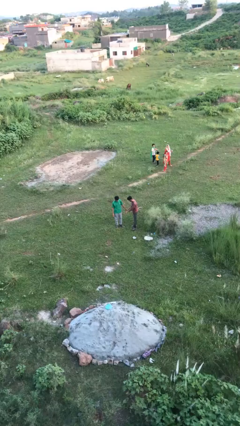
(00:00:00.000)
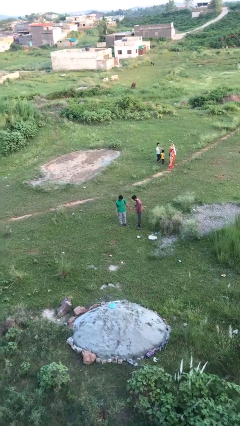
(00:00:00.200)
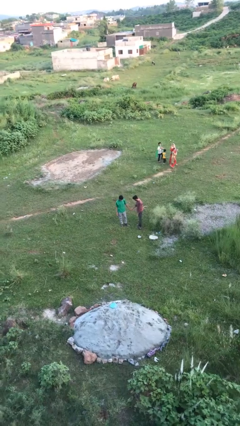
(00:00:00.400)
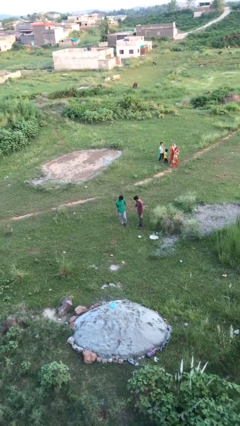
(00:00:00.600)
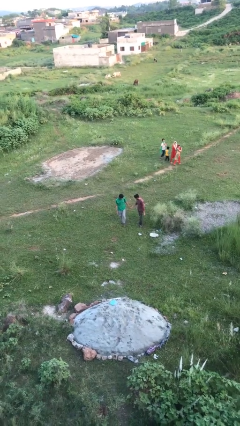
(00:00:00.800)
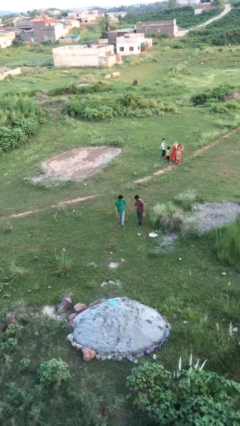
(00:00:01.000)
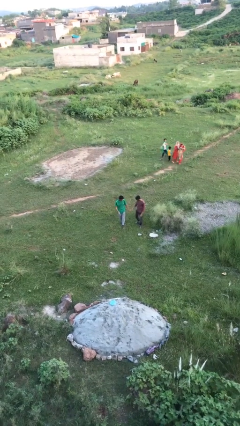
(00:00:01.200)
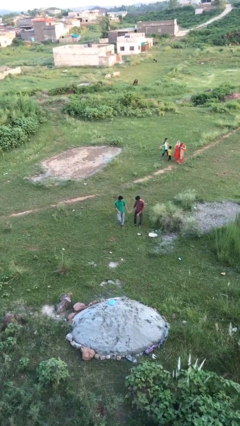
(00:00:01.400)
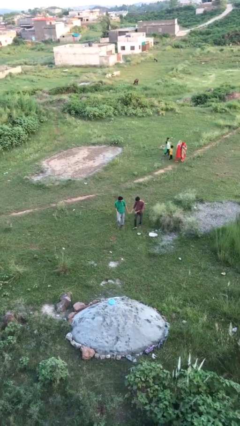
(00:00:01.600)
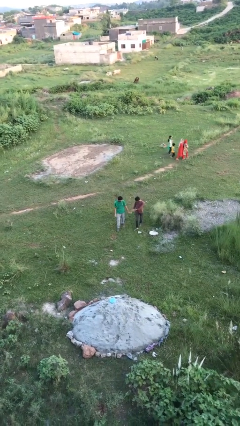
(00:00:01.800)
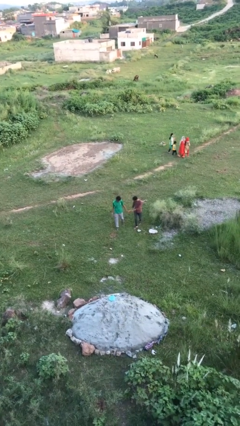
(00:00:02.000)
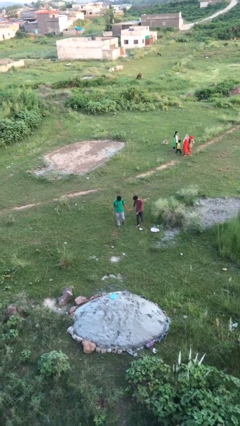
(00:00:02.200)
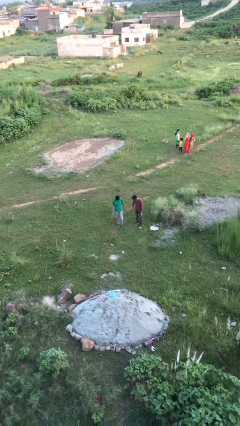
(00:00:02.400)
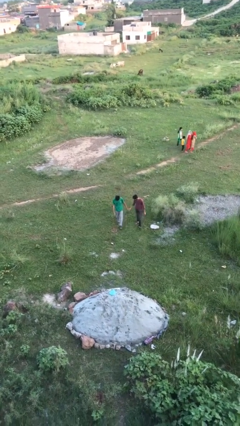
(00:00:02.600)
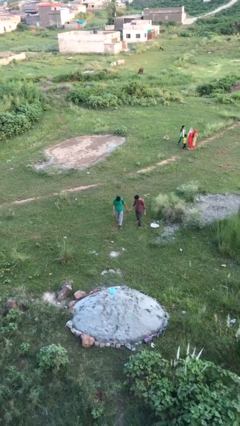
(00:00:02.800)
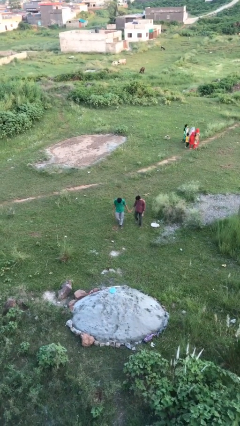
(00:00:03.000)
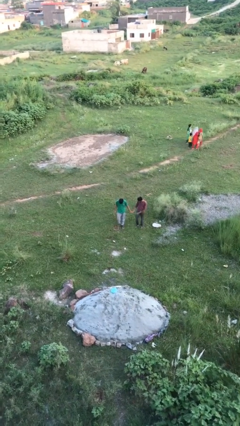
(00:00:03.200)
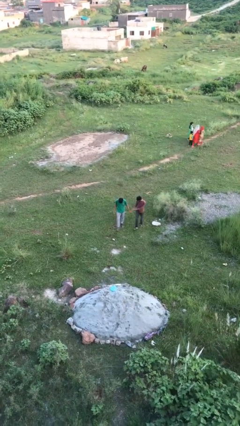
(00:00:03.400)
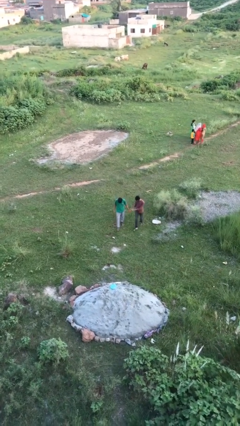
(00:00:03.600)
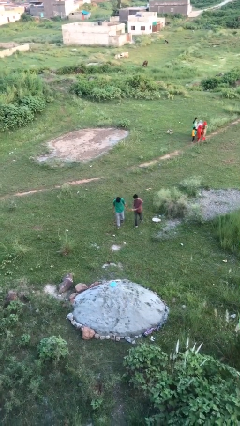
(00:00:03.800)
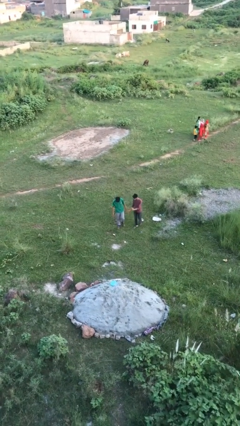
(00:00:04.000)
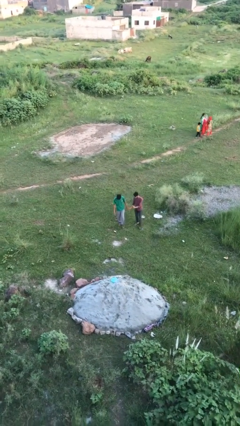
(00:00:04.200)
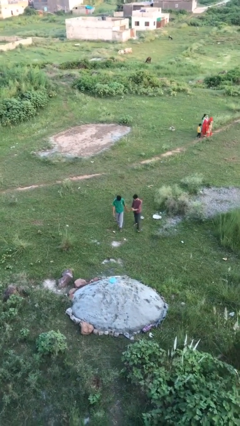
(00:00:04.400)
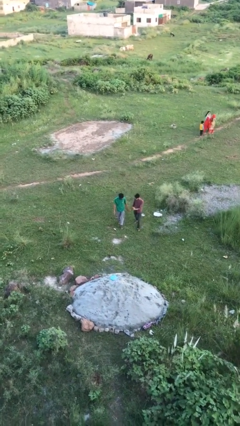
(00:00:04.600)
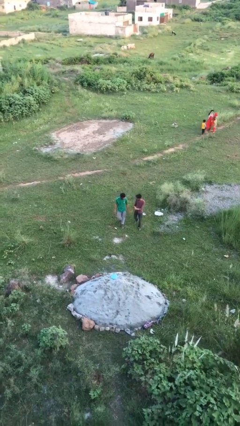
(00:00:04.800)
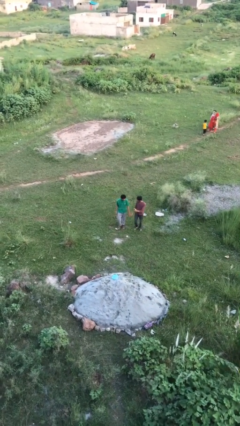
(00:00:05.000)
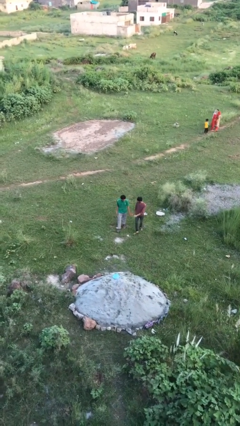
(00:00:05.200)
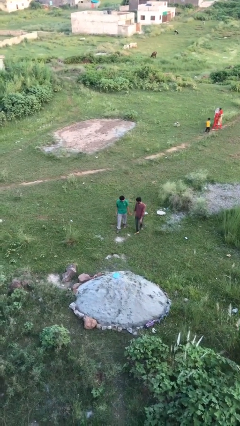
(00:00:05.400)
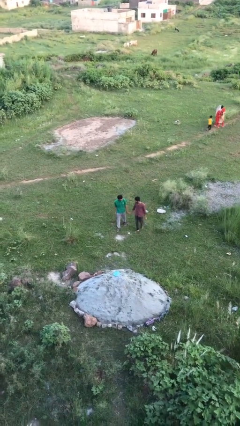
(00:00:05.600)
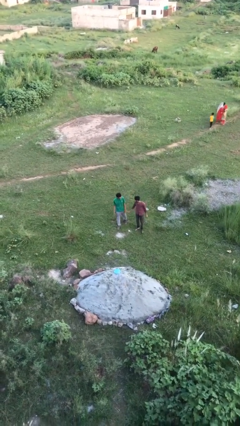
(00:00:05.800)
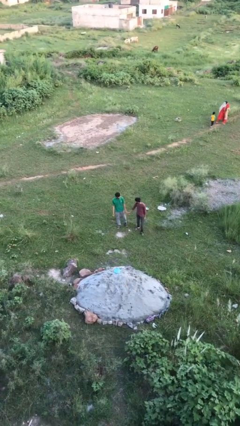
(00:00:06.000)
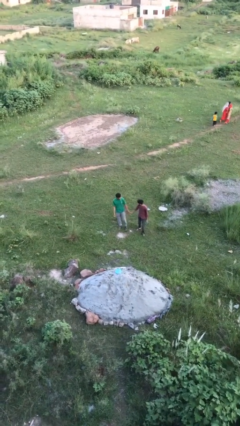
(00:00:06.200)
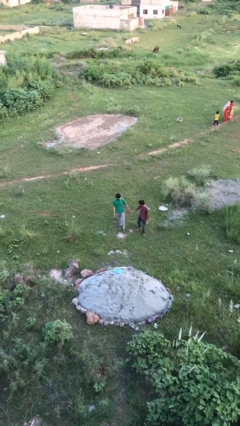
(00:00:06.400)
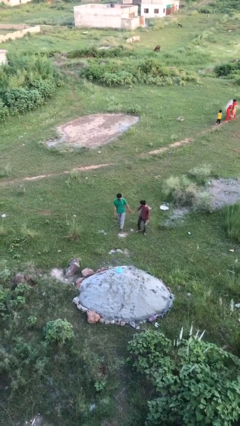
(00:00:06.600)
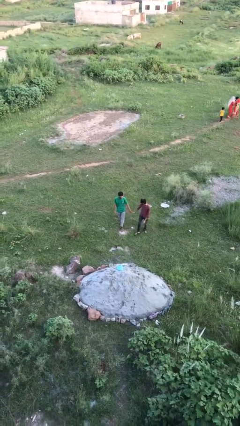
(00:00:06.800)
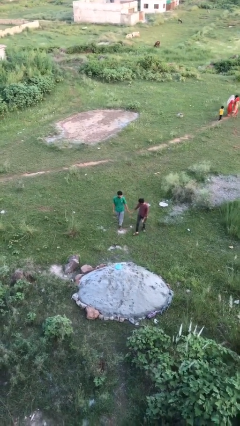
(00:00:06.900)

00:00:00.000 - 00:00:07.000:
person holds hand

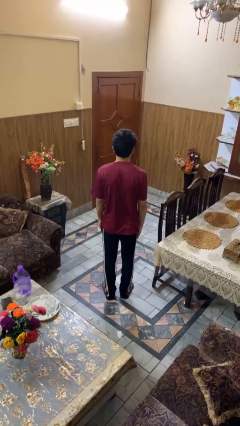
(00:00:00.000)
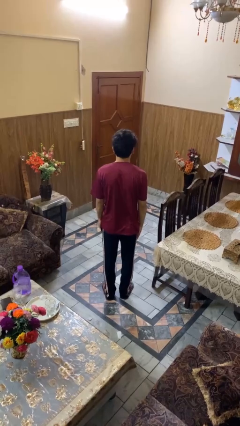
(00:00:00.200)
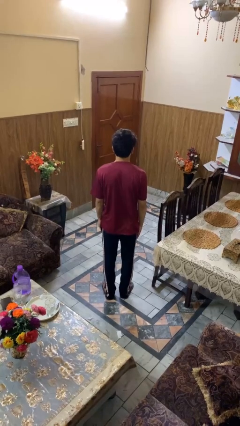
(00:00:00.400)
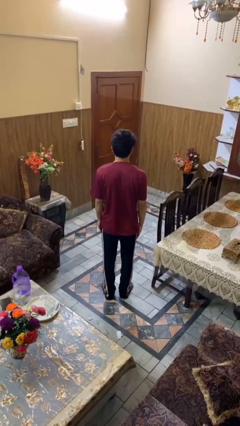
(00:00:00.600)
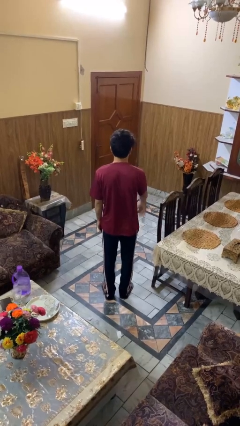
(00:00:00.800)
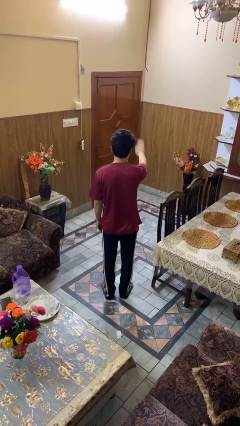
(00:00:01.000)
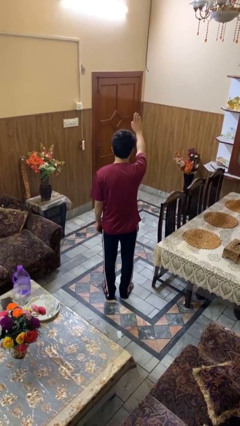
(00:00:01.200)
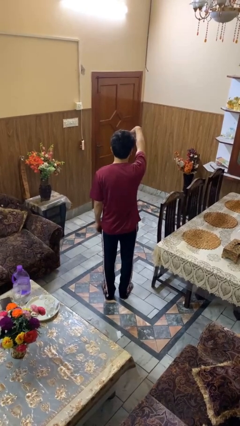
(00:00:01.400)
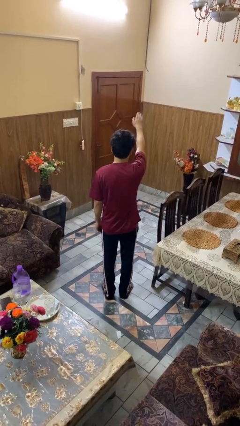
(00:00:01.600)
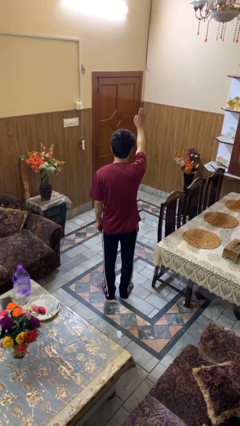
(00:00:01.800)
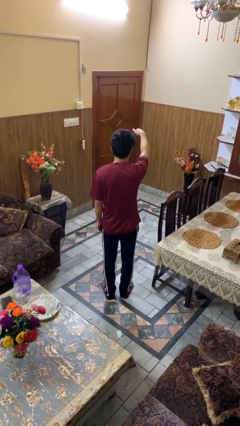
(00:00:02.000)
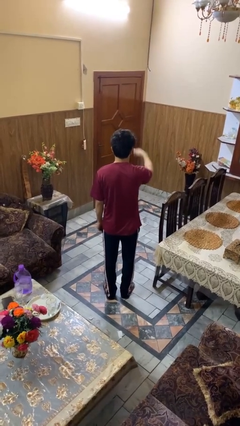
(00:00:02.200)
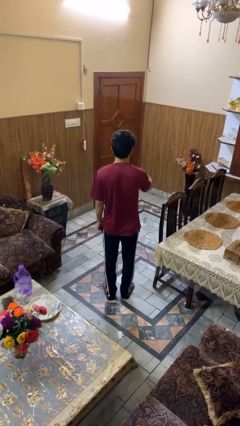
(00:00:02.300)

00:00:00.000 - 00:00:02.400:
person gestures come here

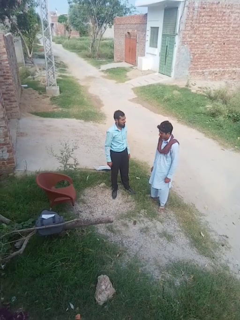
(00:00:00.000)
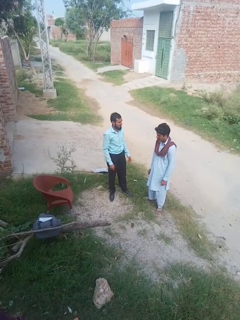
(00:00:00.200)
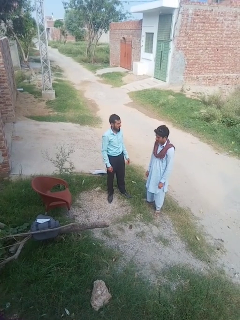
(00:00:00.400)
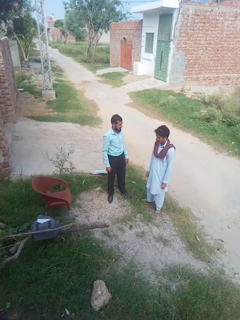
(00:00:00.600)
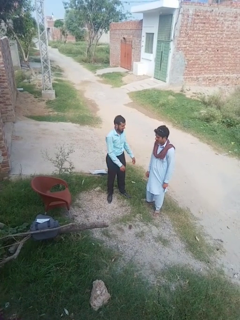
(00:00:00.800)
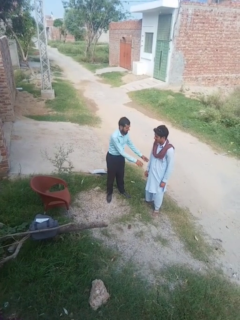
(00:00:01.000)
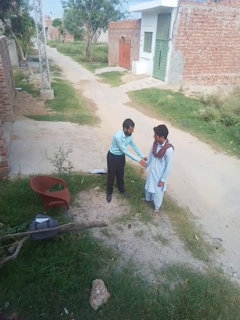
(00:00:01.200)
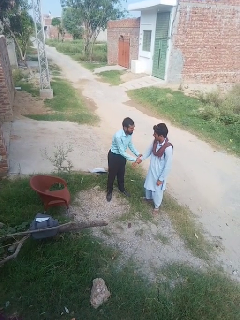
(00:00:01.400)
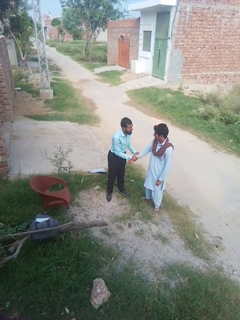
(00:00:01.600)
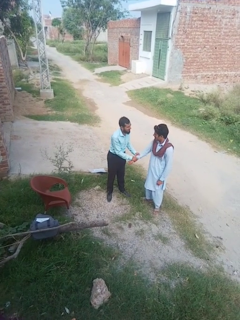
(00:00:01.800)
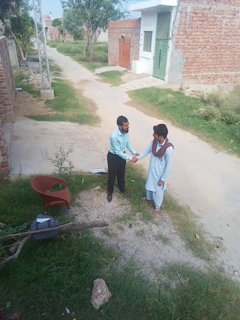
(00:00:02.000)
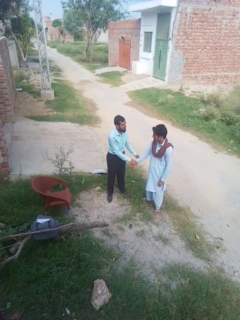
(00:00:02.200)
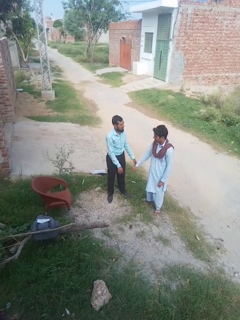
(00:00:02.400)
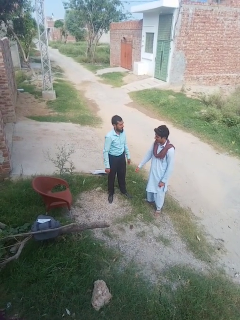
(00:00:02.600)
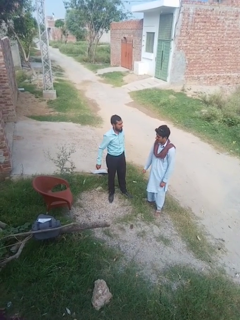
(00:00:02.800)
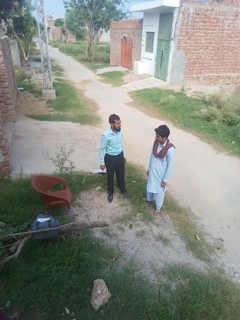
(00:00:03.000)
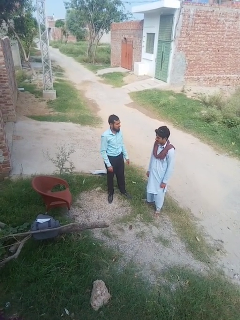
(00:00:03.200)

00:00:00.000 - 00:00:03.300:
person grabs person by forearm

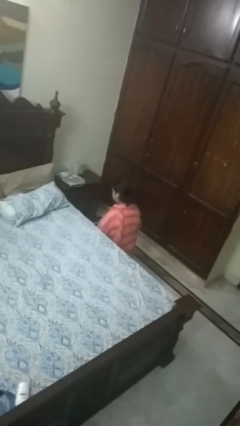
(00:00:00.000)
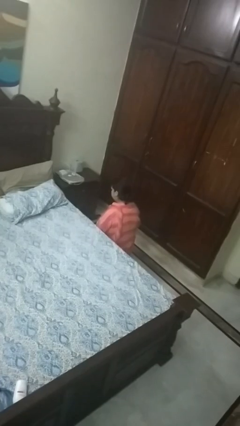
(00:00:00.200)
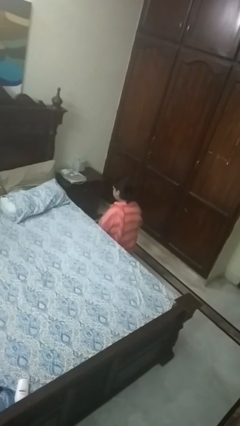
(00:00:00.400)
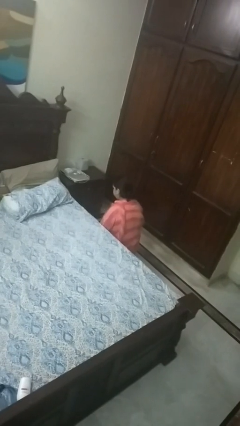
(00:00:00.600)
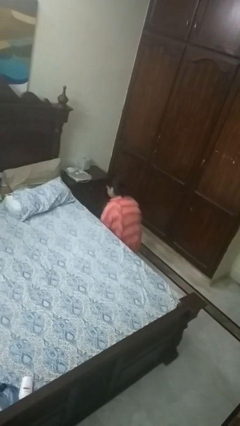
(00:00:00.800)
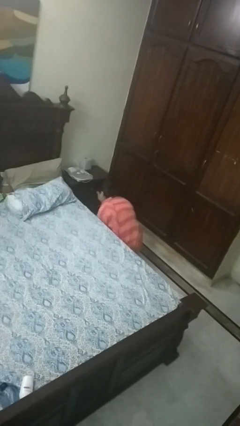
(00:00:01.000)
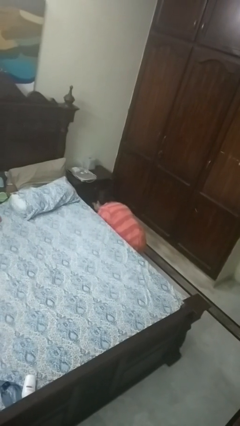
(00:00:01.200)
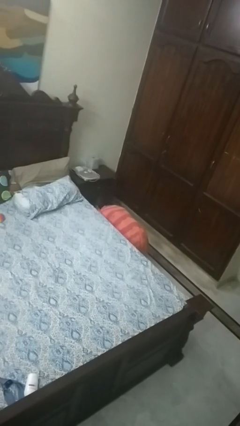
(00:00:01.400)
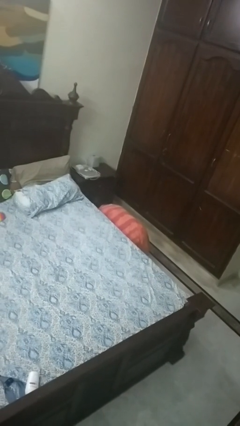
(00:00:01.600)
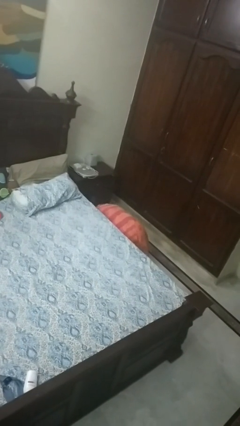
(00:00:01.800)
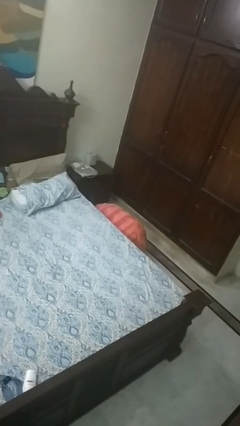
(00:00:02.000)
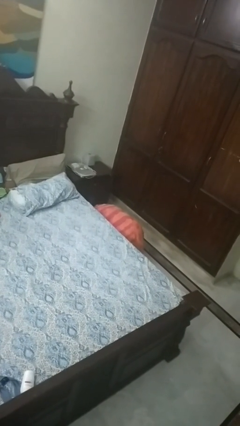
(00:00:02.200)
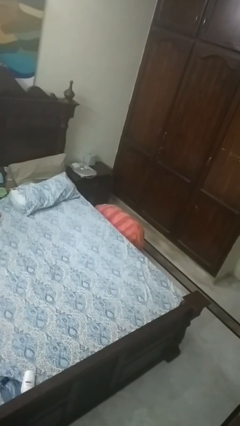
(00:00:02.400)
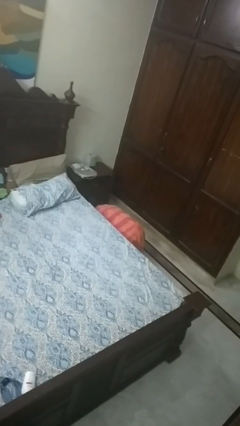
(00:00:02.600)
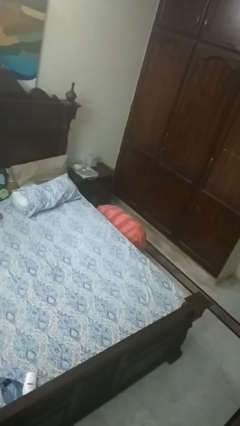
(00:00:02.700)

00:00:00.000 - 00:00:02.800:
person searches under bed

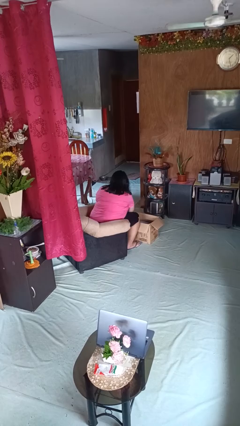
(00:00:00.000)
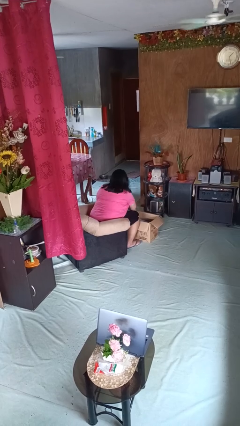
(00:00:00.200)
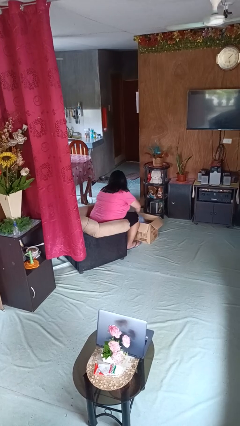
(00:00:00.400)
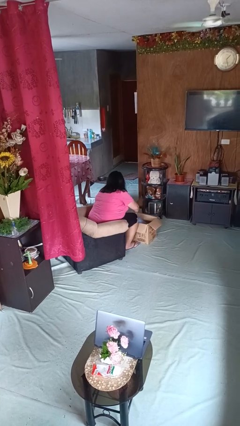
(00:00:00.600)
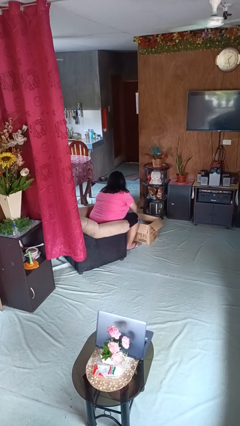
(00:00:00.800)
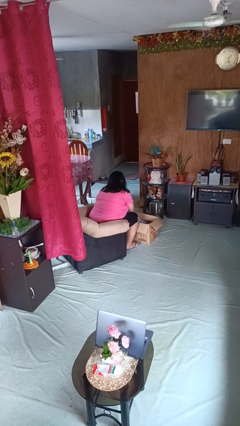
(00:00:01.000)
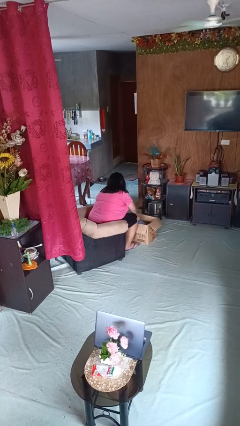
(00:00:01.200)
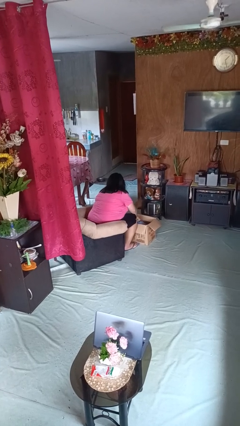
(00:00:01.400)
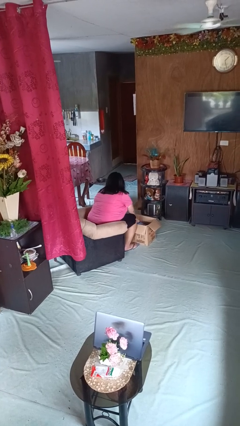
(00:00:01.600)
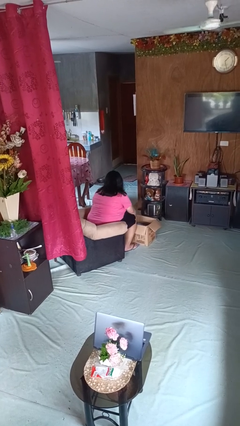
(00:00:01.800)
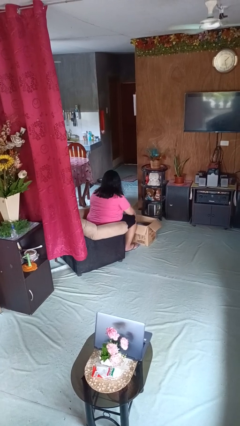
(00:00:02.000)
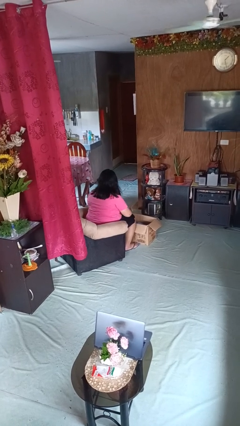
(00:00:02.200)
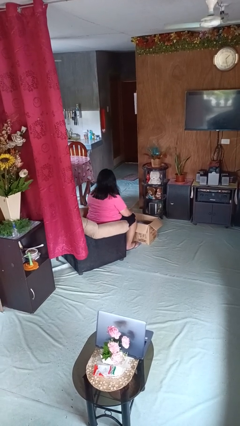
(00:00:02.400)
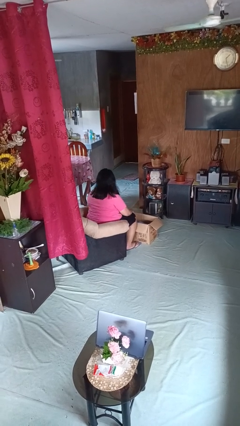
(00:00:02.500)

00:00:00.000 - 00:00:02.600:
person searches in box

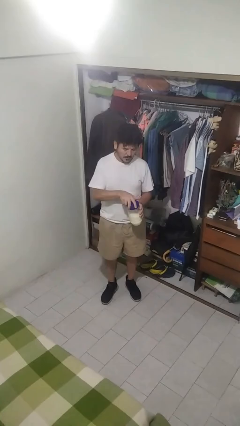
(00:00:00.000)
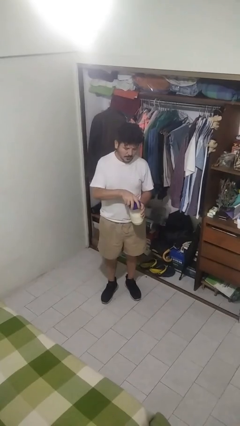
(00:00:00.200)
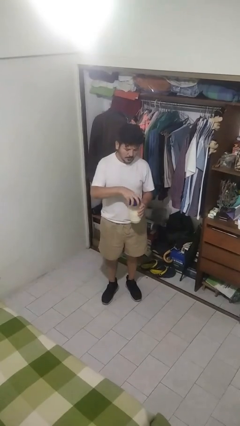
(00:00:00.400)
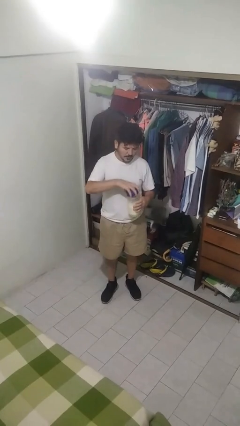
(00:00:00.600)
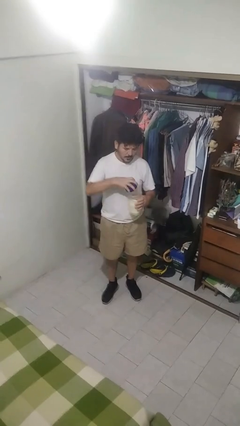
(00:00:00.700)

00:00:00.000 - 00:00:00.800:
person opens jar
